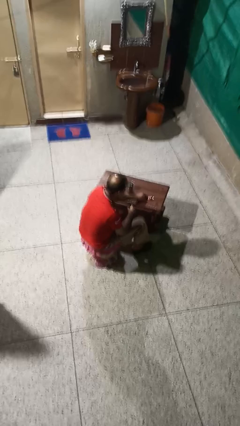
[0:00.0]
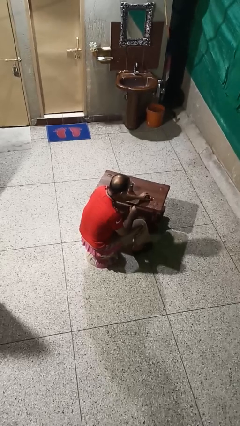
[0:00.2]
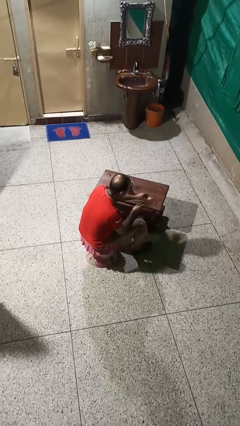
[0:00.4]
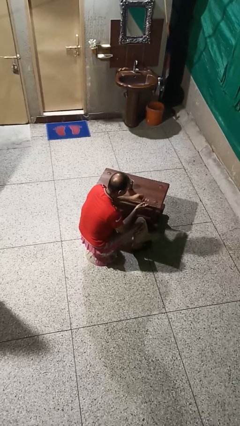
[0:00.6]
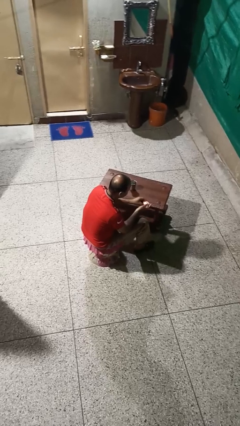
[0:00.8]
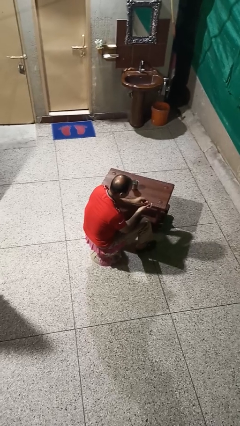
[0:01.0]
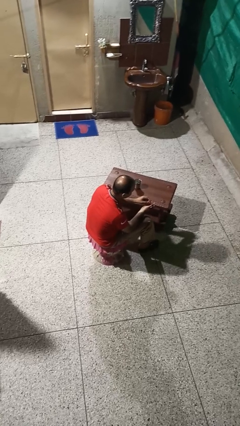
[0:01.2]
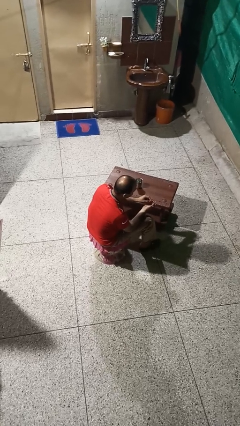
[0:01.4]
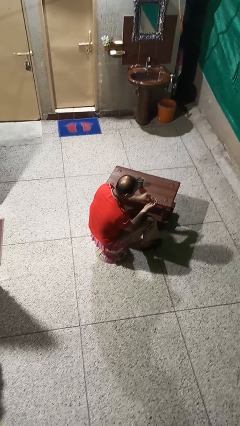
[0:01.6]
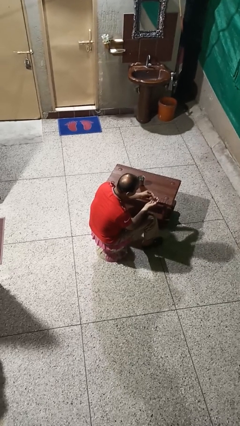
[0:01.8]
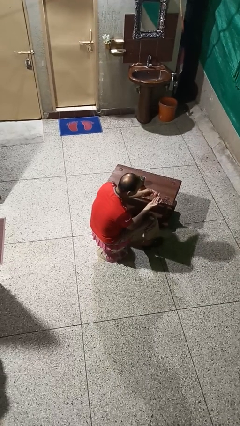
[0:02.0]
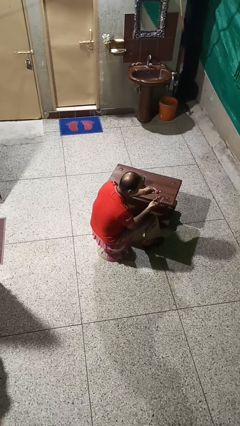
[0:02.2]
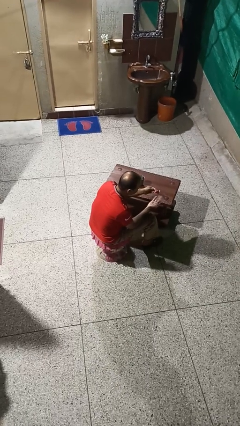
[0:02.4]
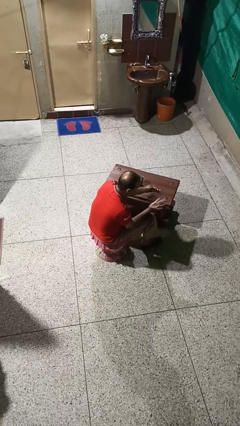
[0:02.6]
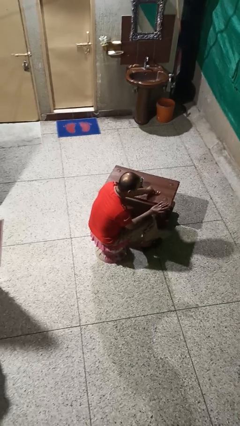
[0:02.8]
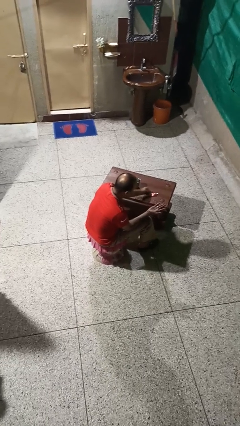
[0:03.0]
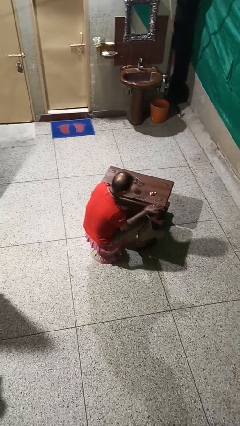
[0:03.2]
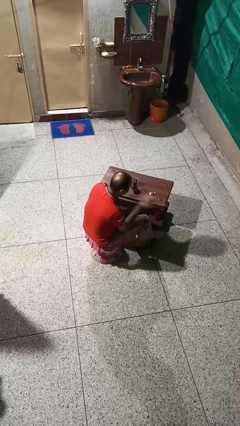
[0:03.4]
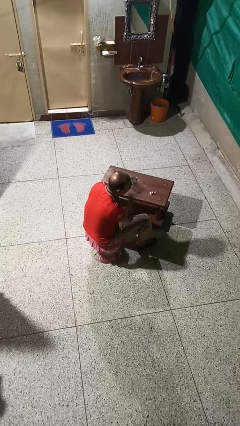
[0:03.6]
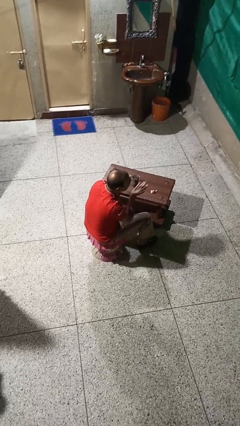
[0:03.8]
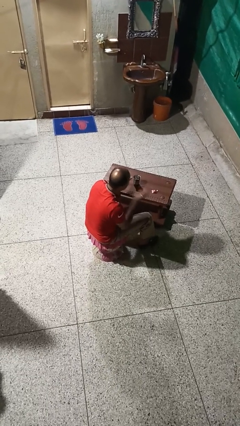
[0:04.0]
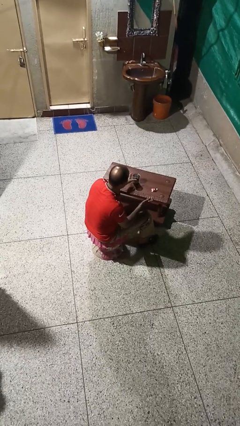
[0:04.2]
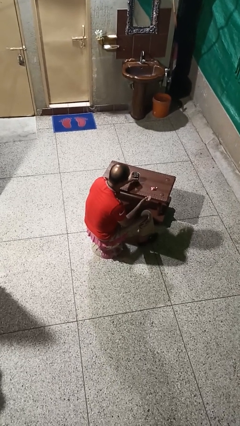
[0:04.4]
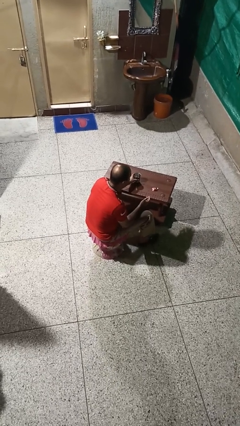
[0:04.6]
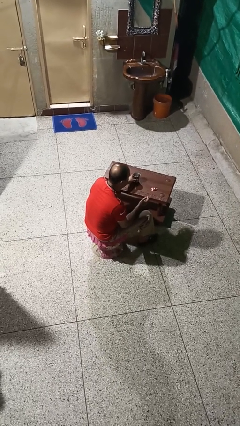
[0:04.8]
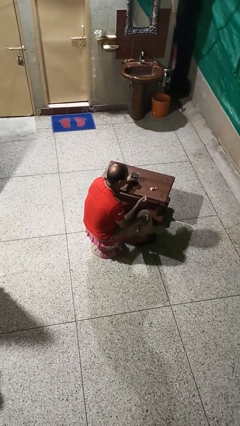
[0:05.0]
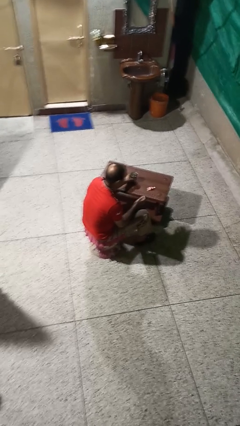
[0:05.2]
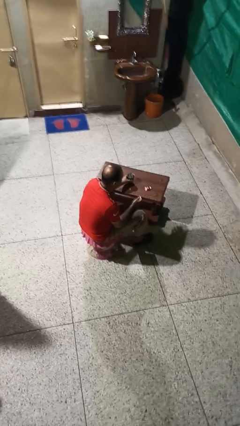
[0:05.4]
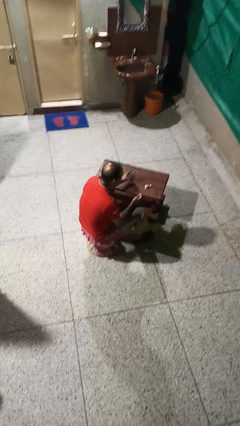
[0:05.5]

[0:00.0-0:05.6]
person takes medicine pills

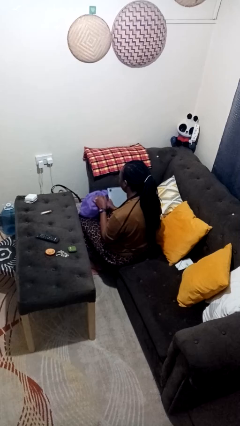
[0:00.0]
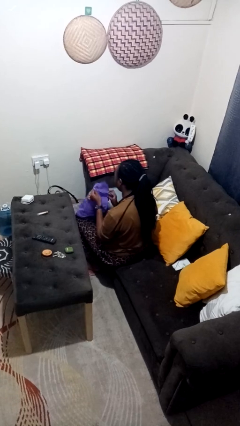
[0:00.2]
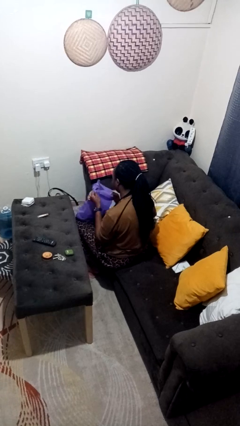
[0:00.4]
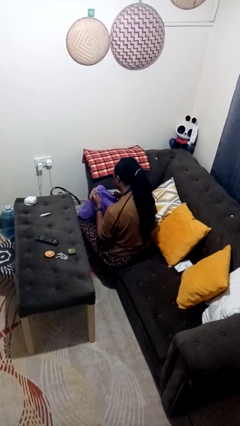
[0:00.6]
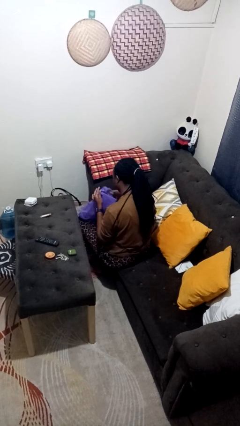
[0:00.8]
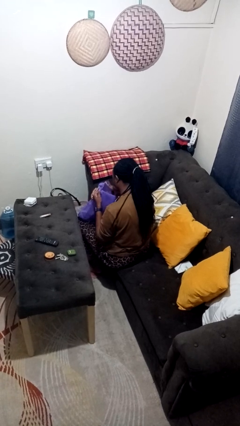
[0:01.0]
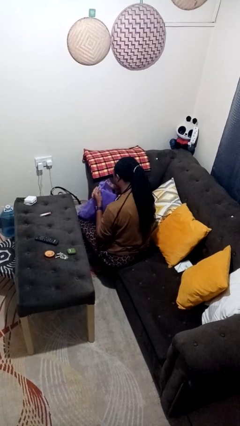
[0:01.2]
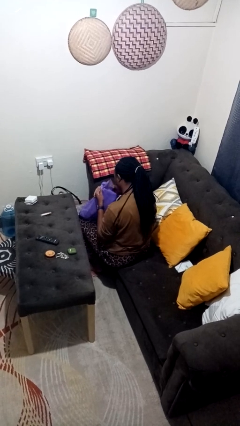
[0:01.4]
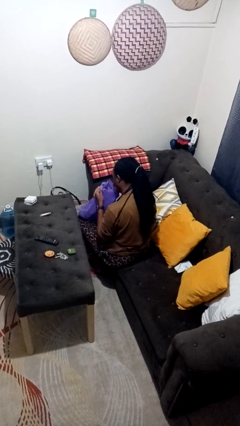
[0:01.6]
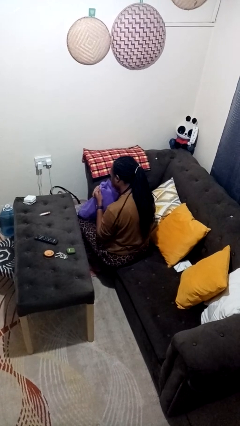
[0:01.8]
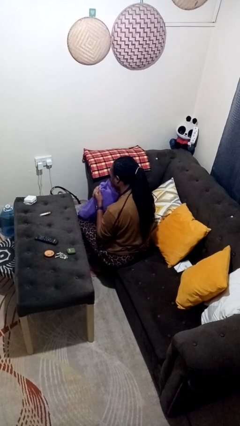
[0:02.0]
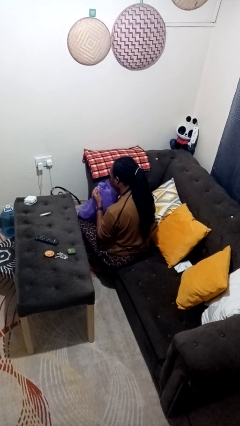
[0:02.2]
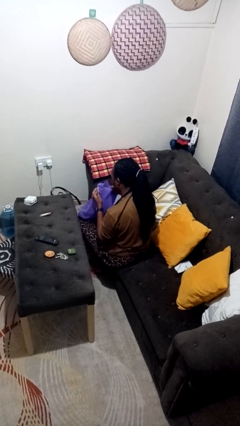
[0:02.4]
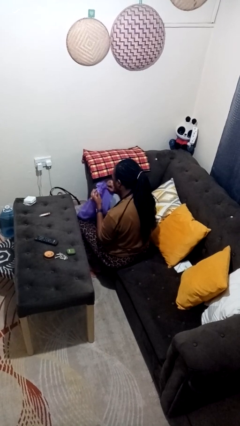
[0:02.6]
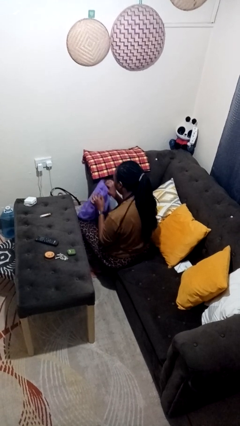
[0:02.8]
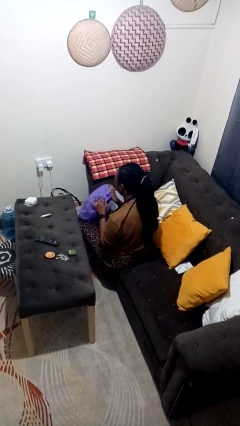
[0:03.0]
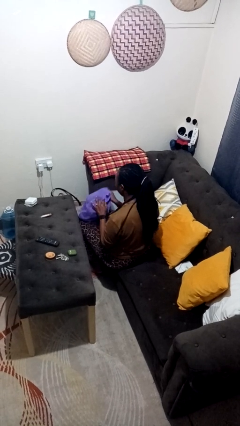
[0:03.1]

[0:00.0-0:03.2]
person searches in bag

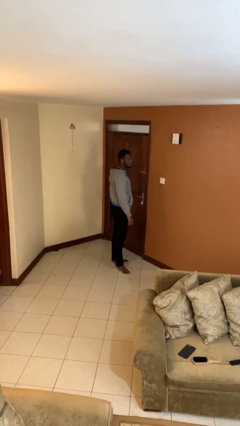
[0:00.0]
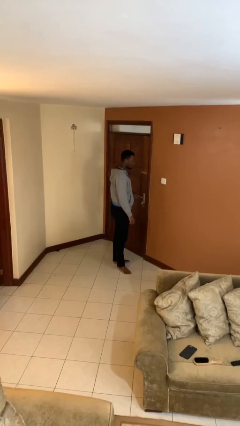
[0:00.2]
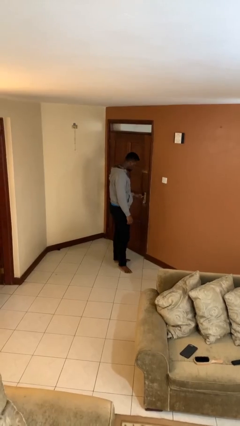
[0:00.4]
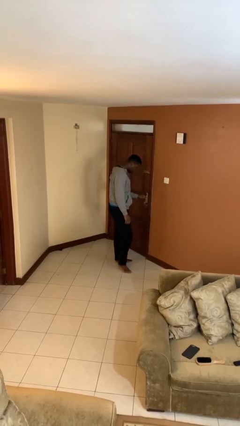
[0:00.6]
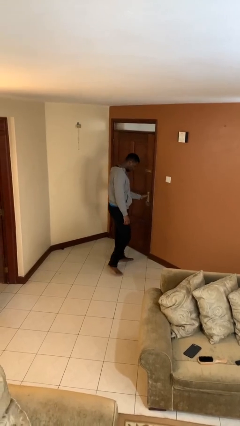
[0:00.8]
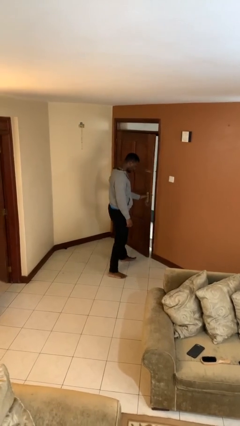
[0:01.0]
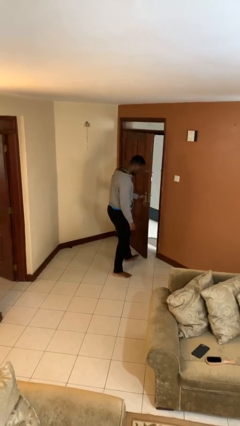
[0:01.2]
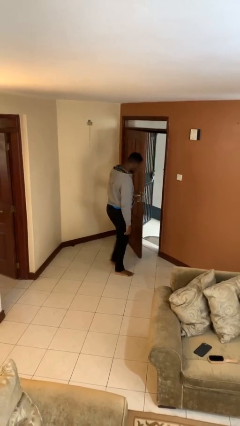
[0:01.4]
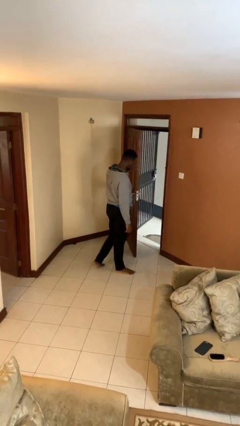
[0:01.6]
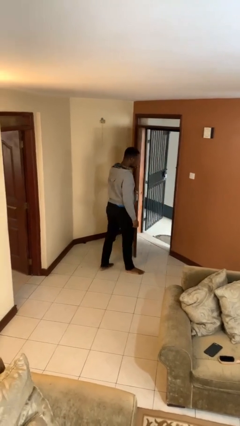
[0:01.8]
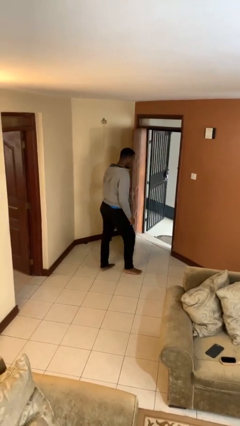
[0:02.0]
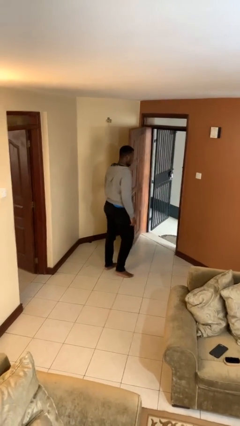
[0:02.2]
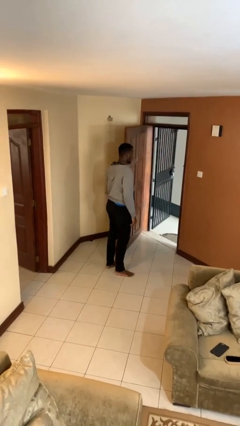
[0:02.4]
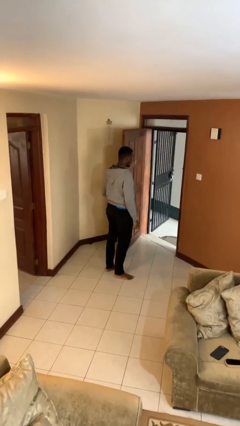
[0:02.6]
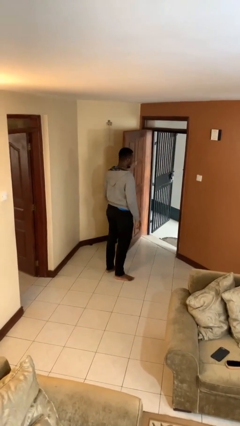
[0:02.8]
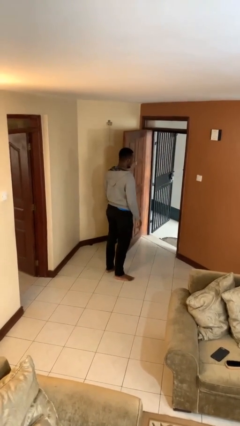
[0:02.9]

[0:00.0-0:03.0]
person opens facility door

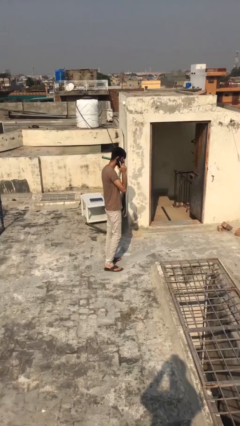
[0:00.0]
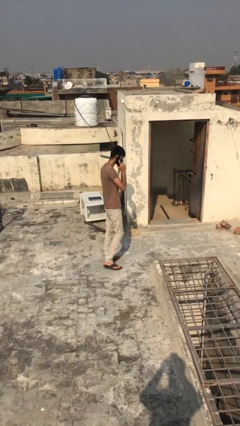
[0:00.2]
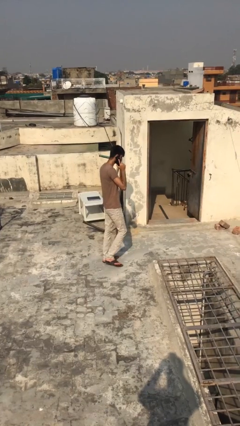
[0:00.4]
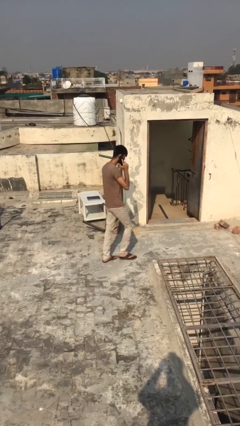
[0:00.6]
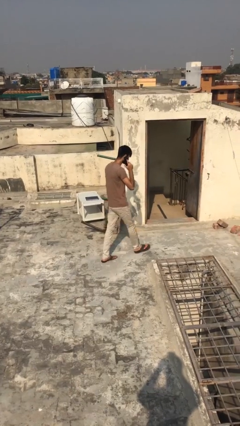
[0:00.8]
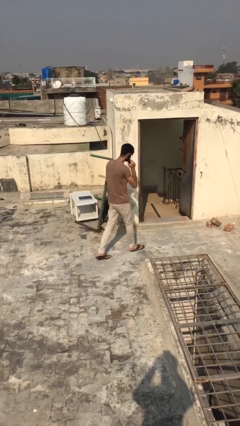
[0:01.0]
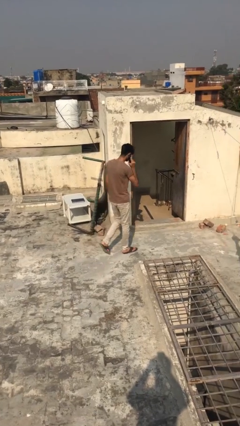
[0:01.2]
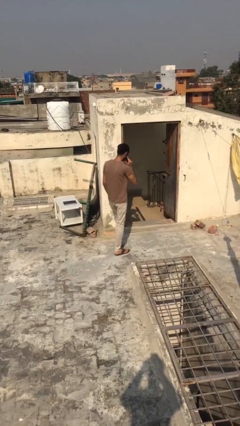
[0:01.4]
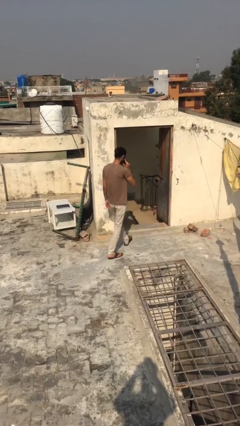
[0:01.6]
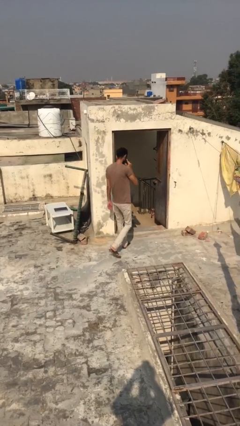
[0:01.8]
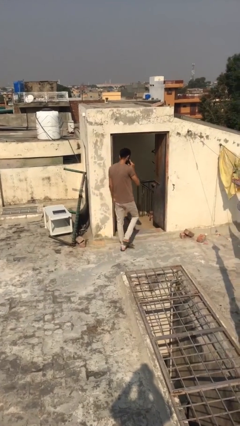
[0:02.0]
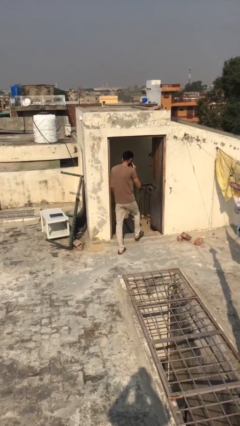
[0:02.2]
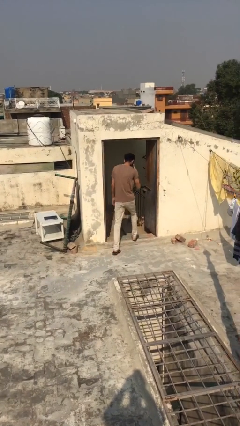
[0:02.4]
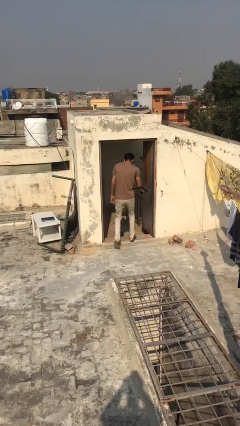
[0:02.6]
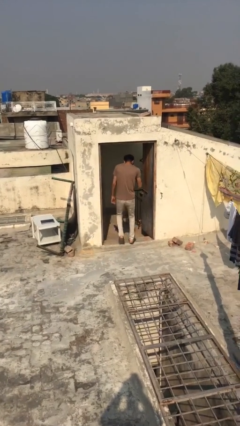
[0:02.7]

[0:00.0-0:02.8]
person exits scene through structure

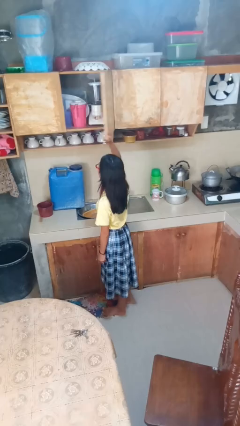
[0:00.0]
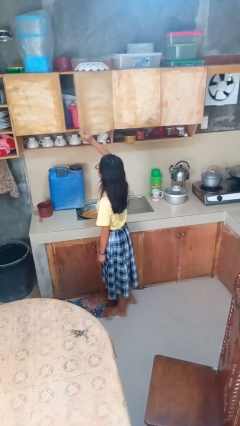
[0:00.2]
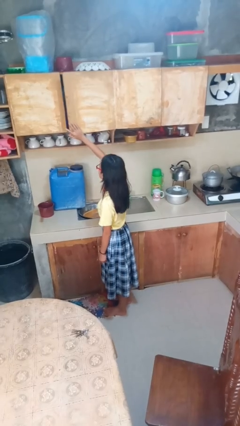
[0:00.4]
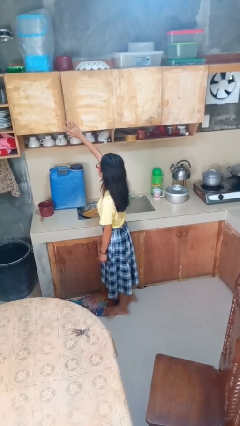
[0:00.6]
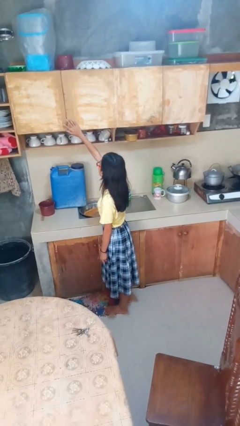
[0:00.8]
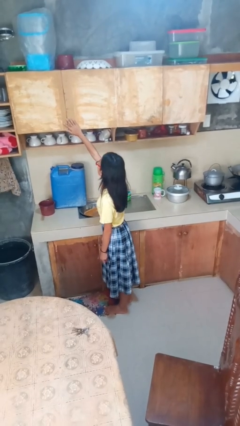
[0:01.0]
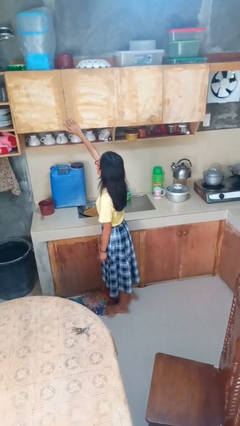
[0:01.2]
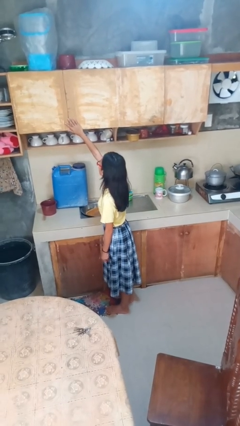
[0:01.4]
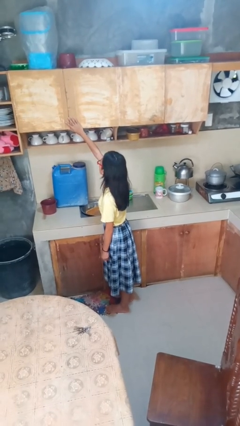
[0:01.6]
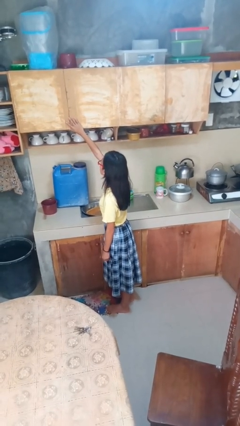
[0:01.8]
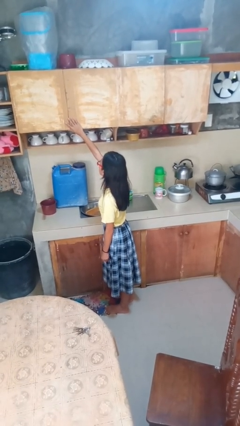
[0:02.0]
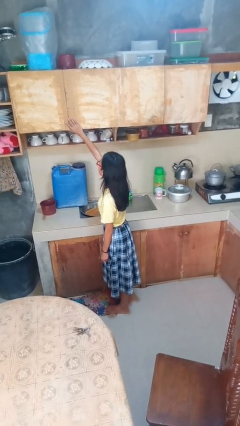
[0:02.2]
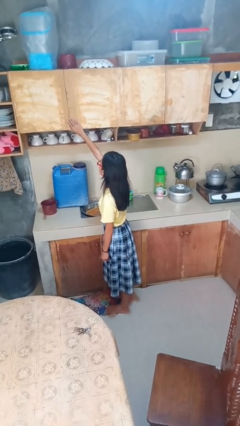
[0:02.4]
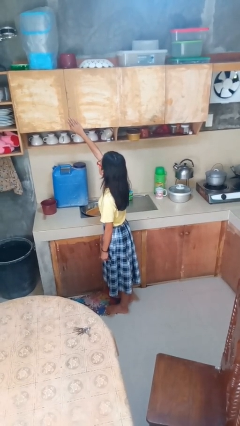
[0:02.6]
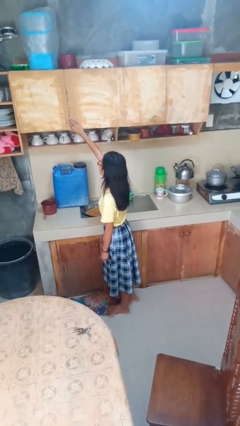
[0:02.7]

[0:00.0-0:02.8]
person closes cabinet

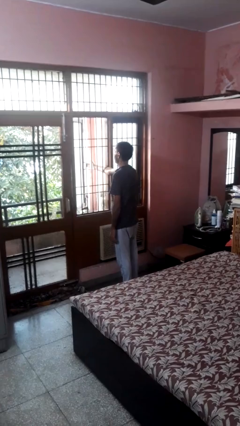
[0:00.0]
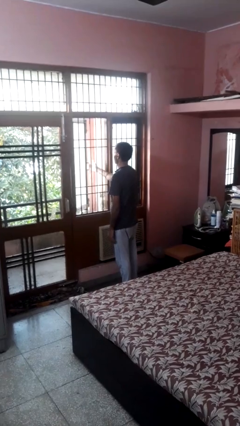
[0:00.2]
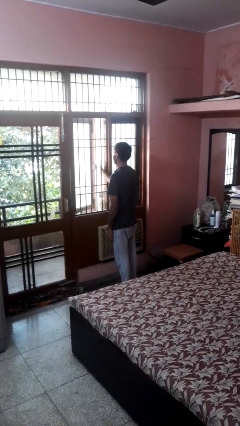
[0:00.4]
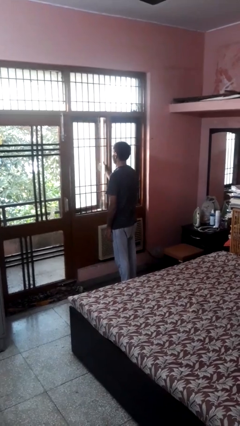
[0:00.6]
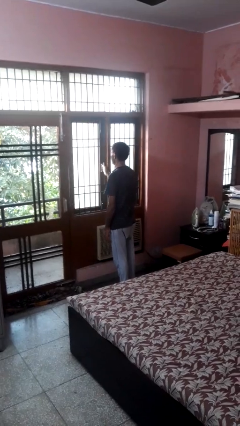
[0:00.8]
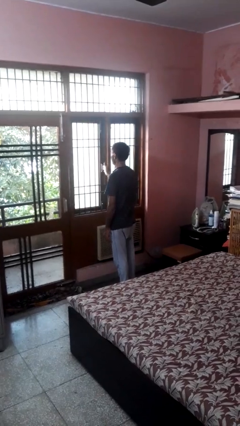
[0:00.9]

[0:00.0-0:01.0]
person closes home window
